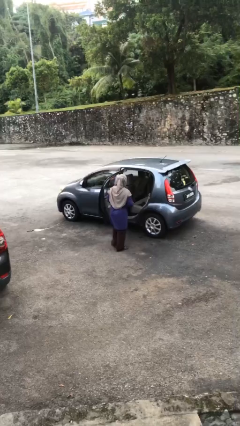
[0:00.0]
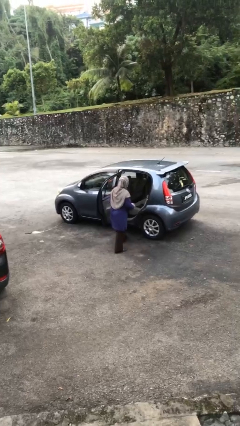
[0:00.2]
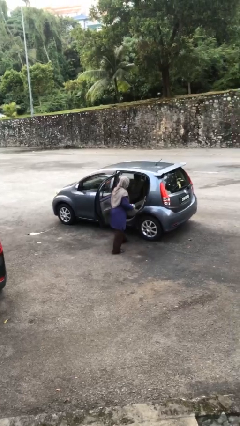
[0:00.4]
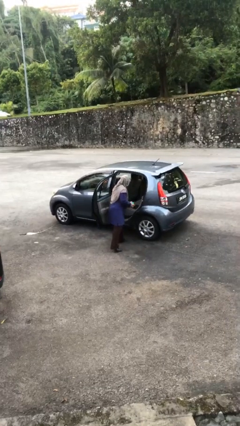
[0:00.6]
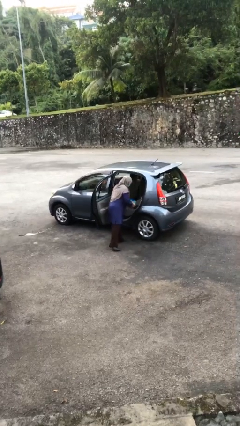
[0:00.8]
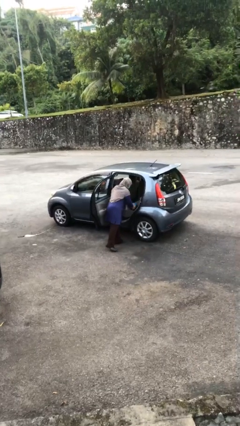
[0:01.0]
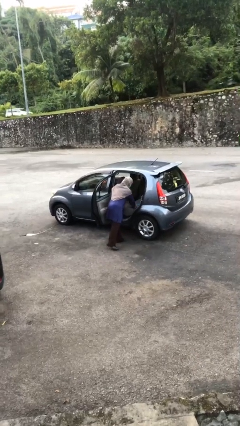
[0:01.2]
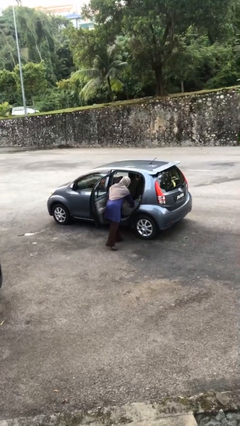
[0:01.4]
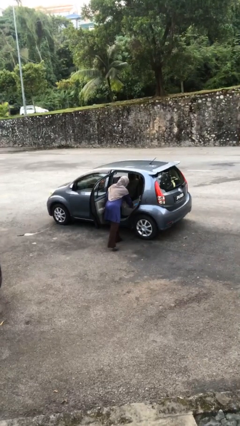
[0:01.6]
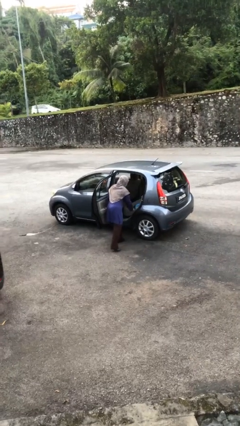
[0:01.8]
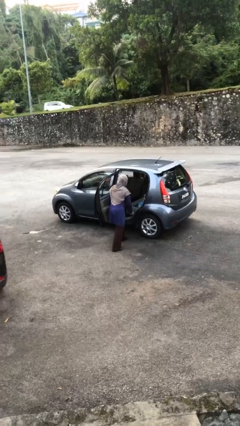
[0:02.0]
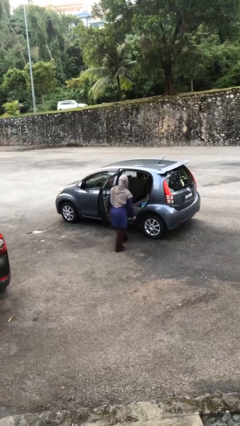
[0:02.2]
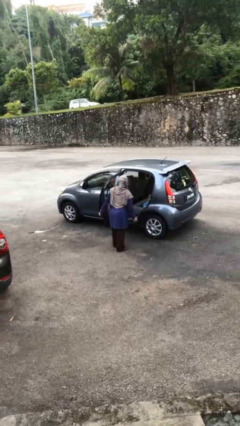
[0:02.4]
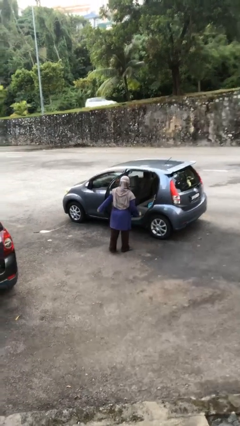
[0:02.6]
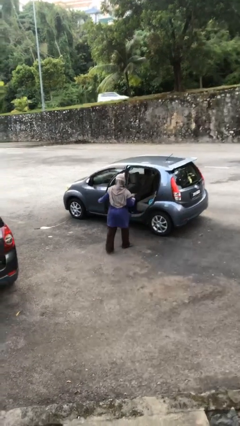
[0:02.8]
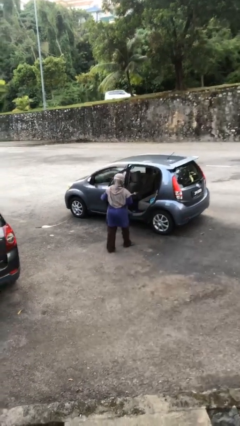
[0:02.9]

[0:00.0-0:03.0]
person loads car

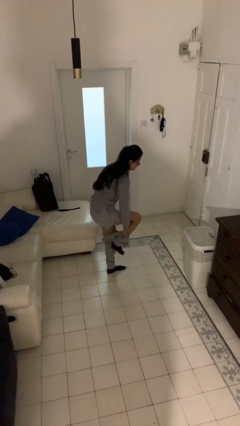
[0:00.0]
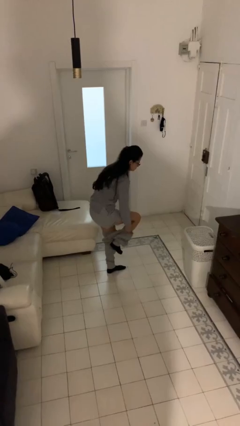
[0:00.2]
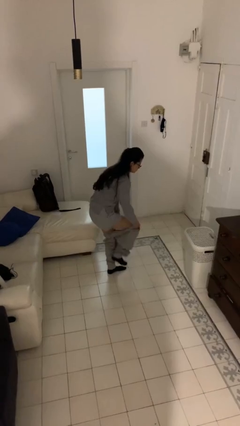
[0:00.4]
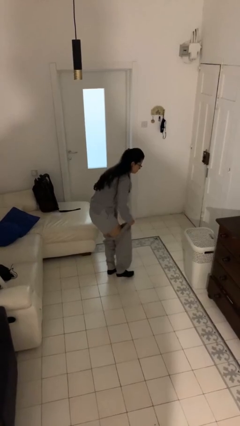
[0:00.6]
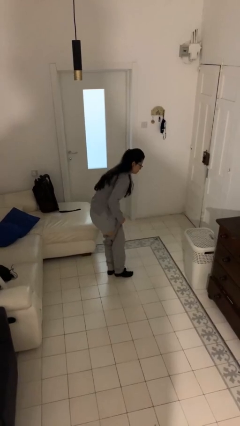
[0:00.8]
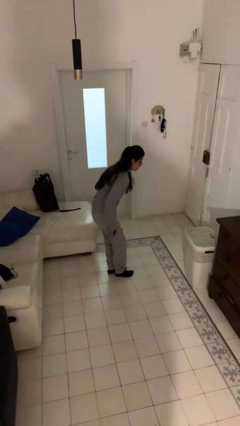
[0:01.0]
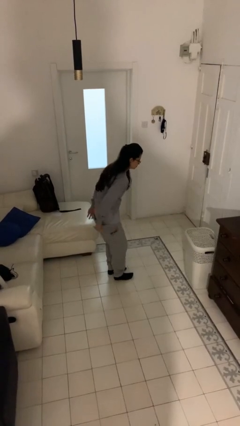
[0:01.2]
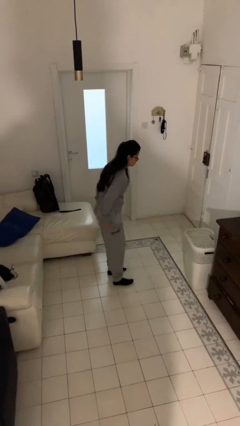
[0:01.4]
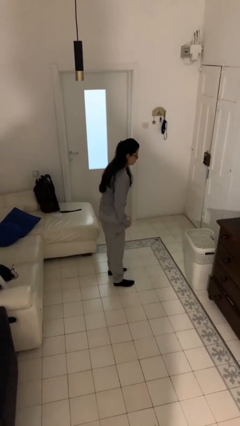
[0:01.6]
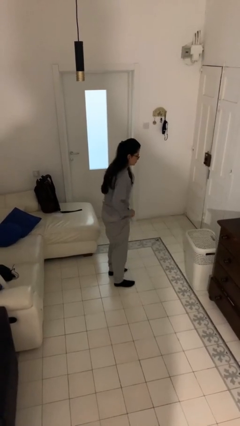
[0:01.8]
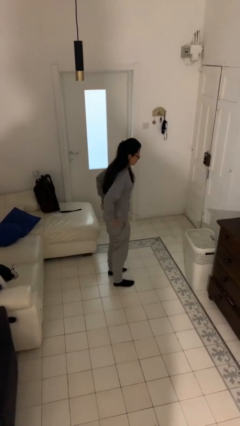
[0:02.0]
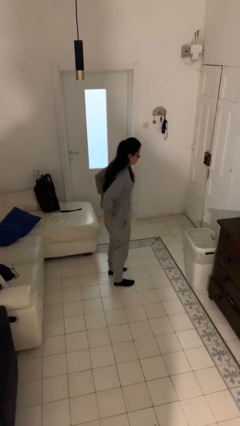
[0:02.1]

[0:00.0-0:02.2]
person puts on pants

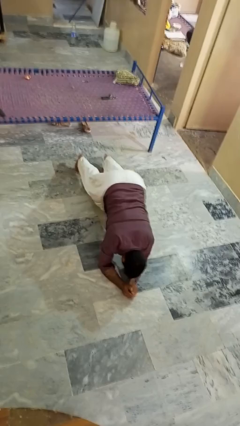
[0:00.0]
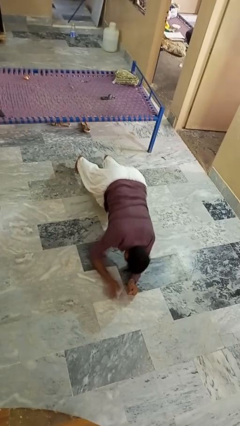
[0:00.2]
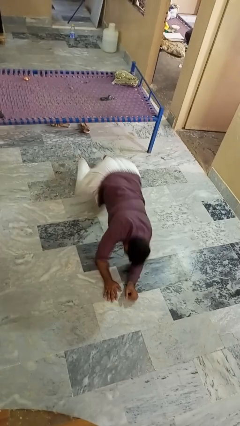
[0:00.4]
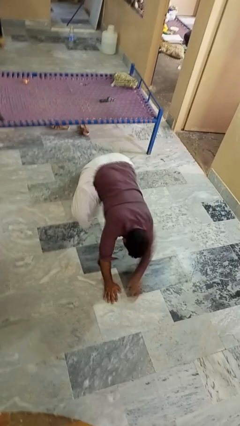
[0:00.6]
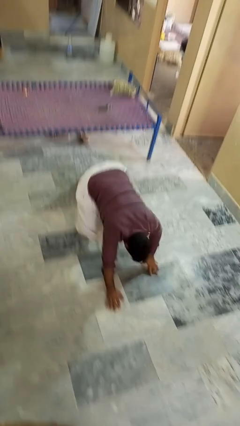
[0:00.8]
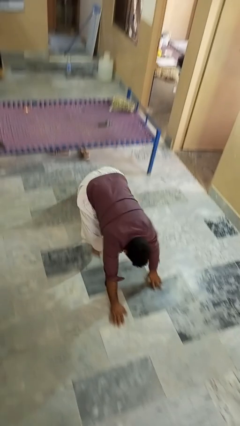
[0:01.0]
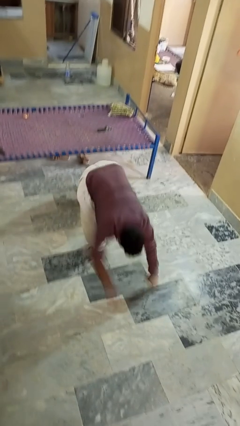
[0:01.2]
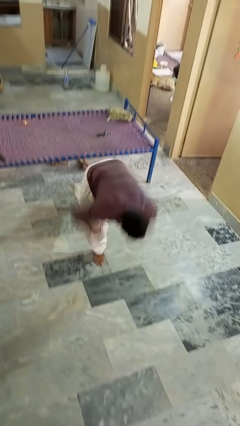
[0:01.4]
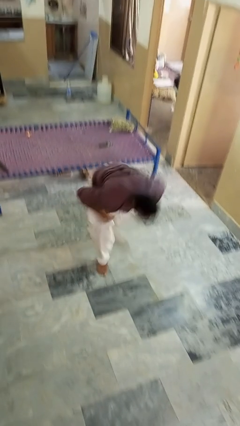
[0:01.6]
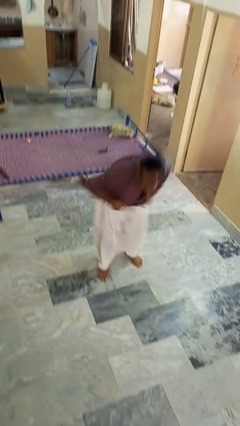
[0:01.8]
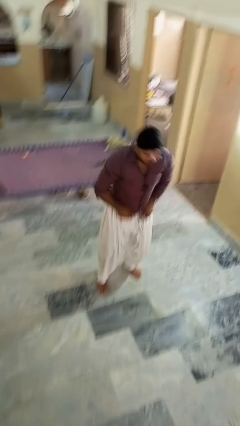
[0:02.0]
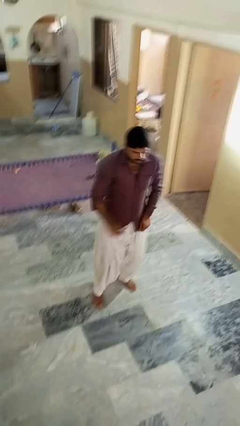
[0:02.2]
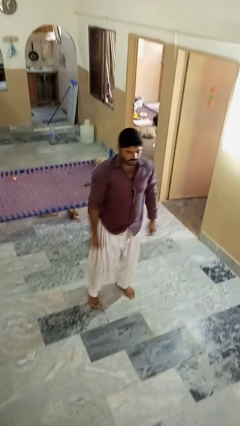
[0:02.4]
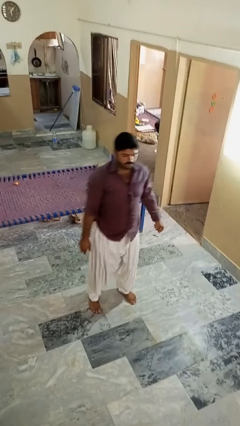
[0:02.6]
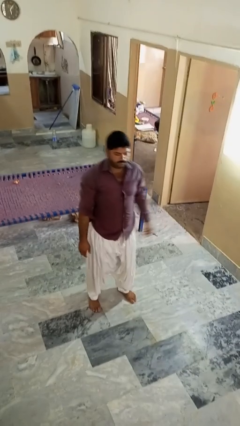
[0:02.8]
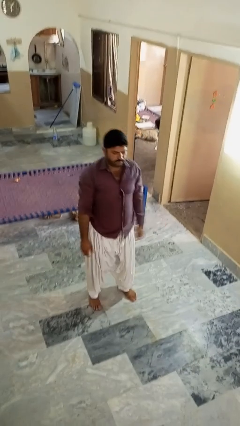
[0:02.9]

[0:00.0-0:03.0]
person stands up from floor

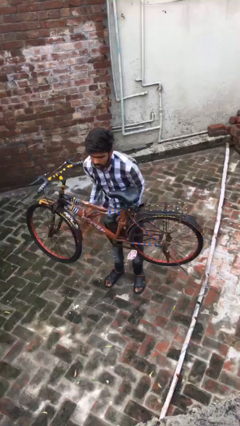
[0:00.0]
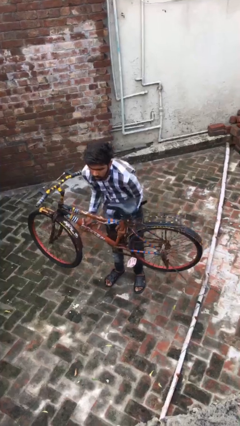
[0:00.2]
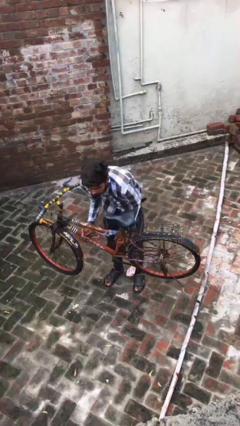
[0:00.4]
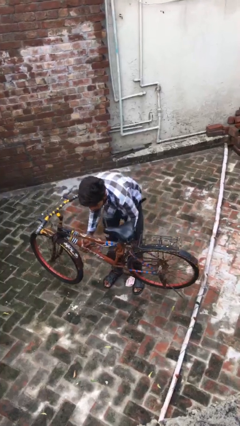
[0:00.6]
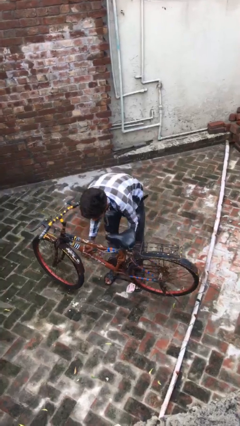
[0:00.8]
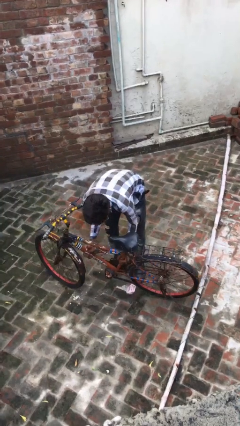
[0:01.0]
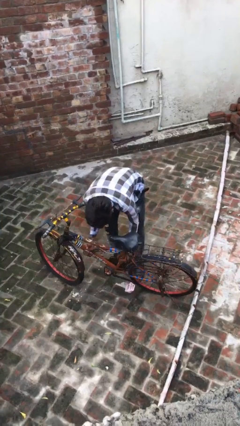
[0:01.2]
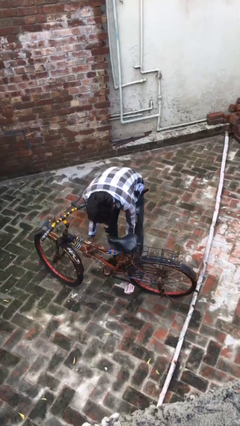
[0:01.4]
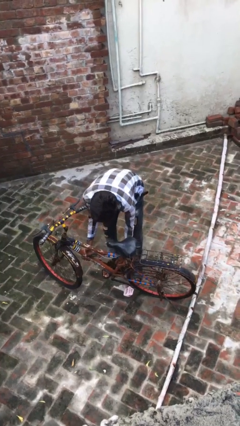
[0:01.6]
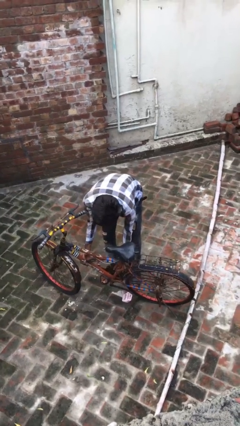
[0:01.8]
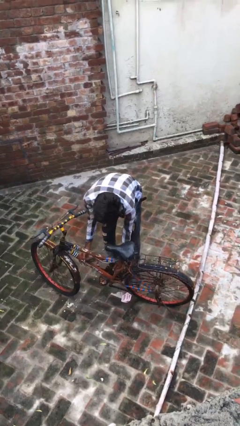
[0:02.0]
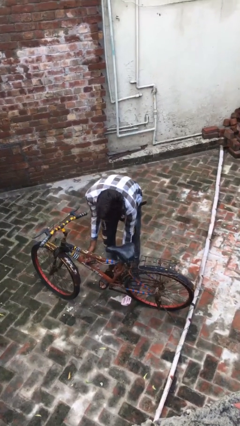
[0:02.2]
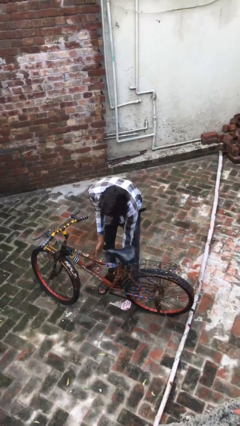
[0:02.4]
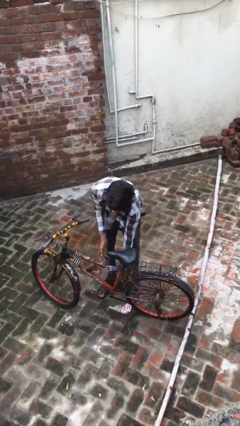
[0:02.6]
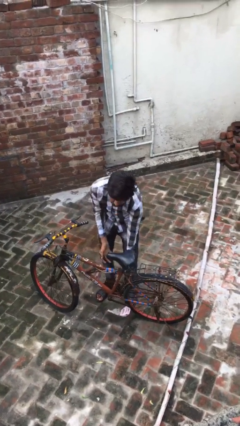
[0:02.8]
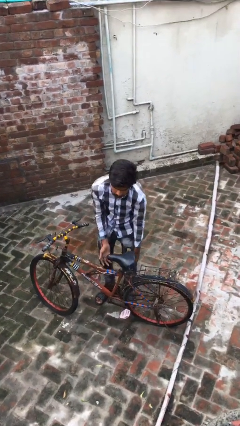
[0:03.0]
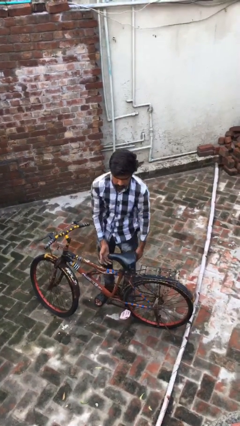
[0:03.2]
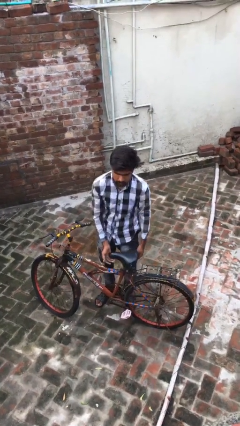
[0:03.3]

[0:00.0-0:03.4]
person puts down object on floor

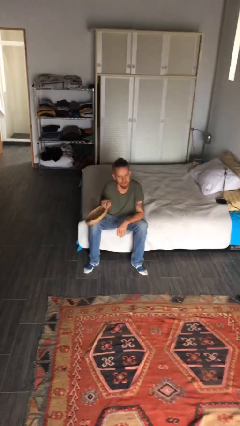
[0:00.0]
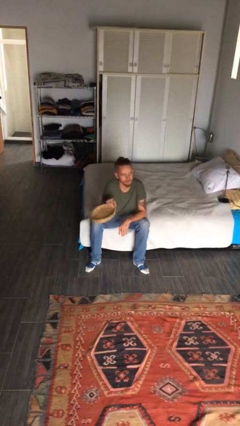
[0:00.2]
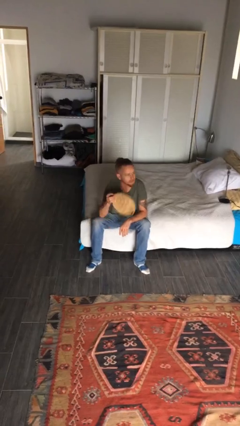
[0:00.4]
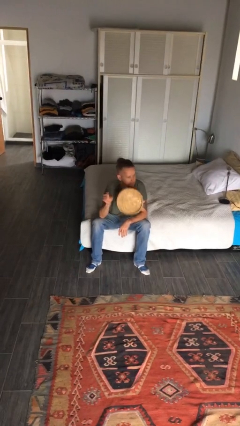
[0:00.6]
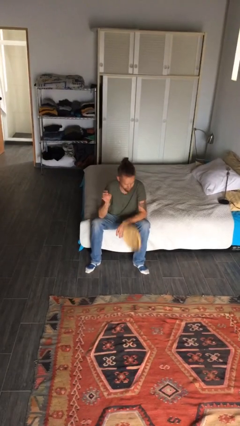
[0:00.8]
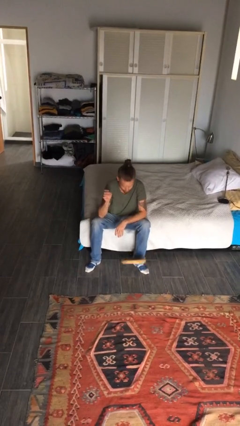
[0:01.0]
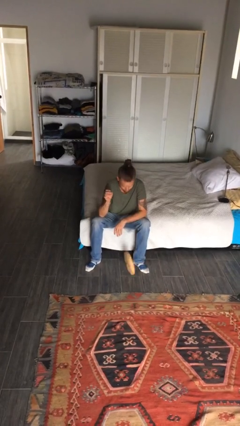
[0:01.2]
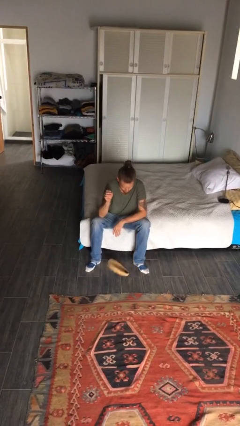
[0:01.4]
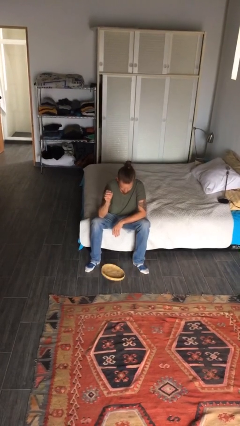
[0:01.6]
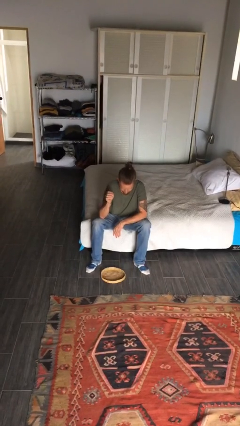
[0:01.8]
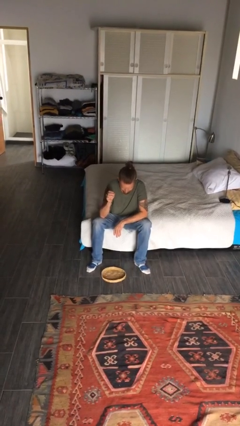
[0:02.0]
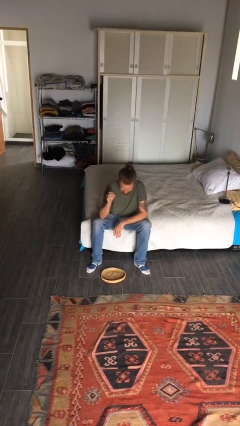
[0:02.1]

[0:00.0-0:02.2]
person drops object

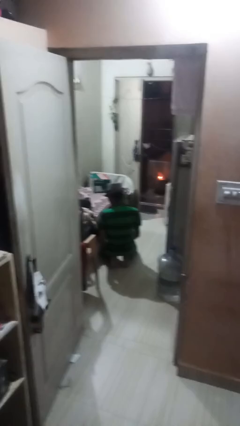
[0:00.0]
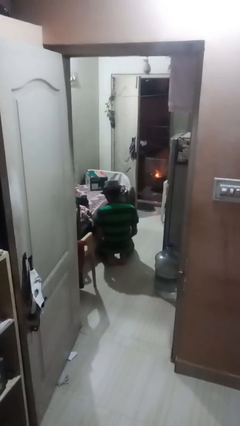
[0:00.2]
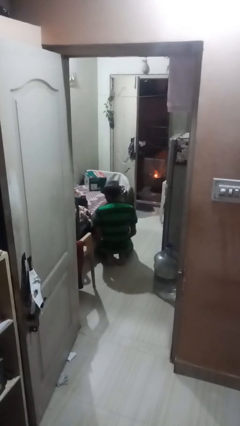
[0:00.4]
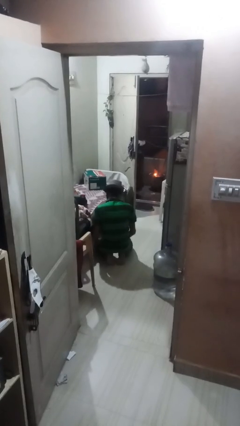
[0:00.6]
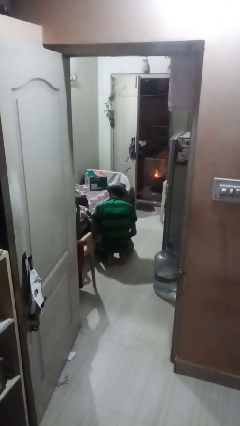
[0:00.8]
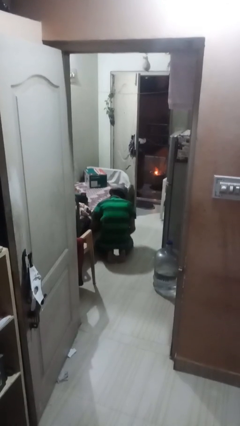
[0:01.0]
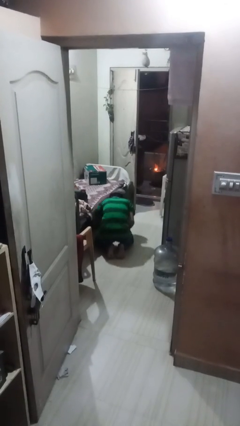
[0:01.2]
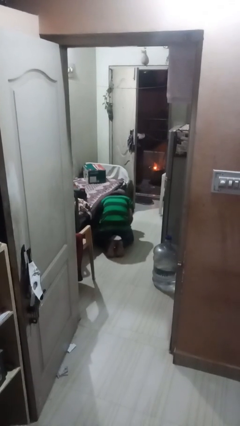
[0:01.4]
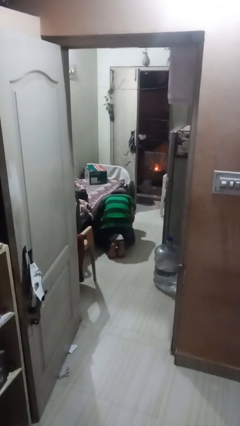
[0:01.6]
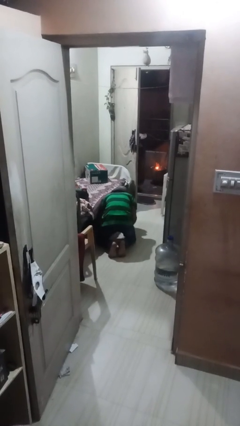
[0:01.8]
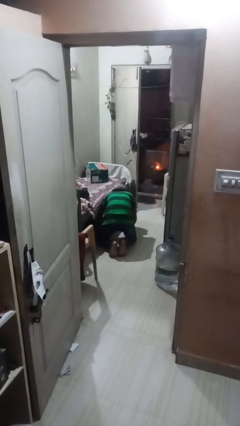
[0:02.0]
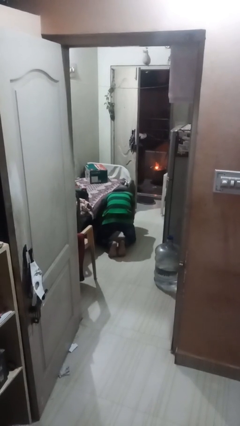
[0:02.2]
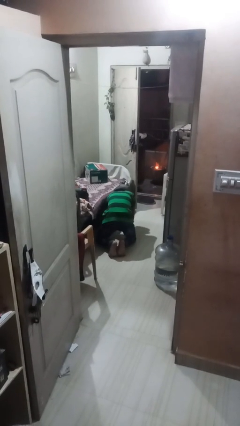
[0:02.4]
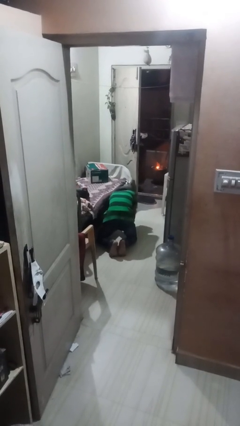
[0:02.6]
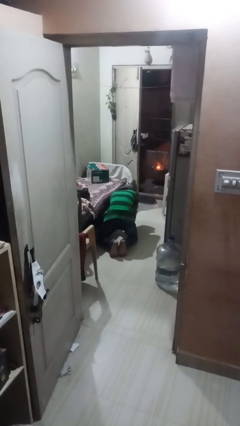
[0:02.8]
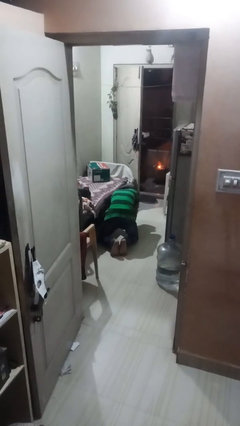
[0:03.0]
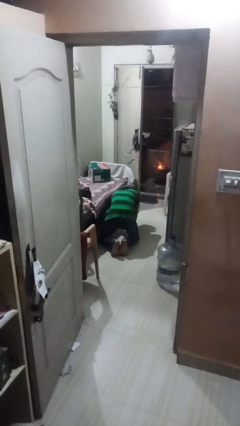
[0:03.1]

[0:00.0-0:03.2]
person searches under bed

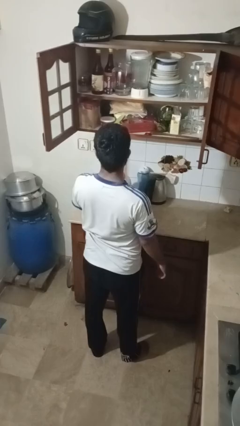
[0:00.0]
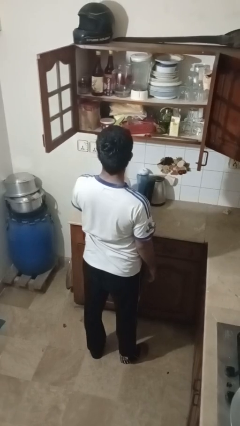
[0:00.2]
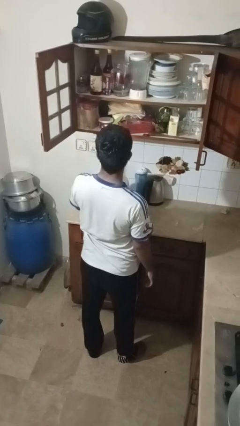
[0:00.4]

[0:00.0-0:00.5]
person takes object from cabinet
